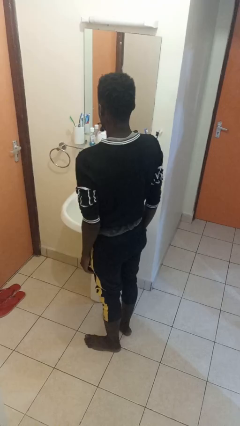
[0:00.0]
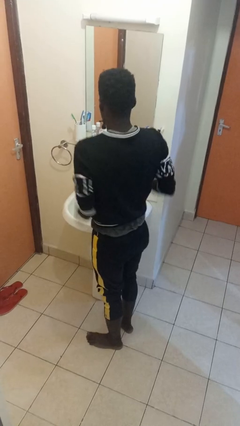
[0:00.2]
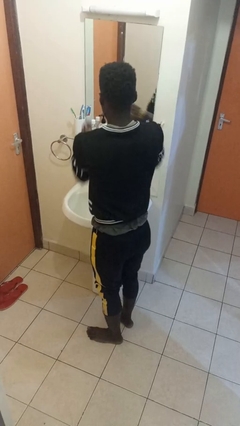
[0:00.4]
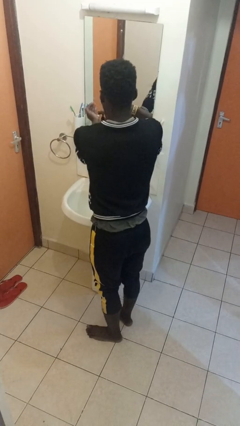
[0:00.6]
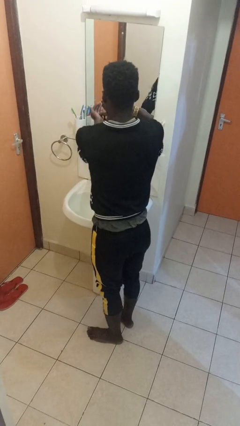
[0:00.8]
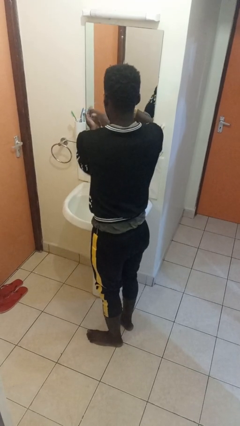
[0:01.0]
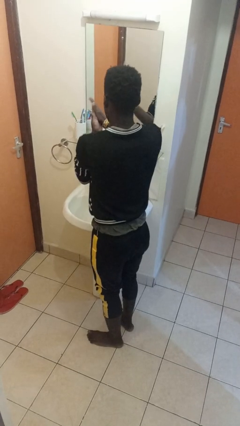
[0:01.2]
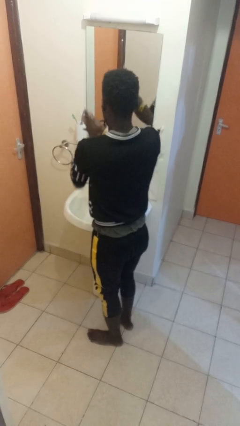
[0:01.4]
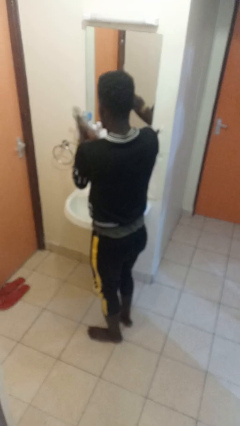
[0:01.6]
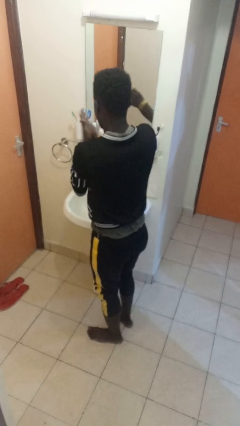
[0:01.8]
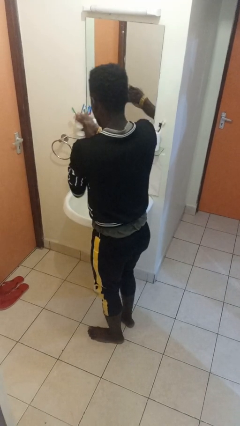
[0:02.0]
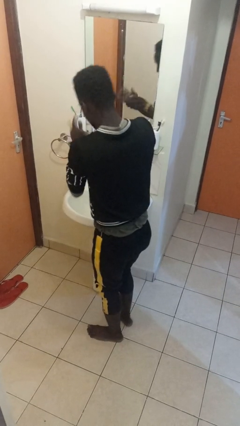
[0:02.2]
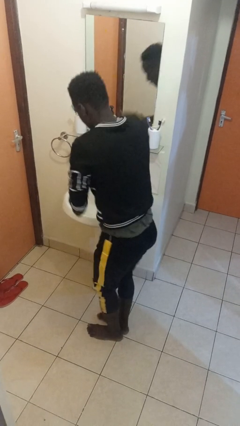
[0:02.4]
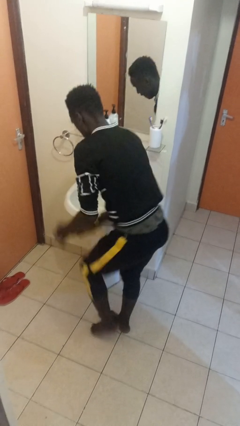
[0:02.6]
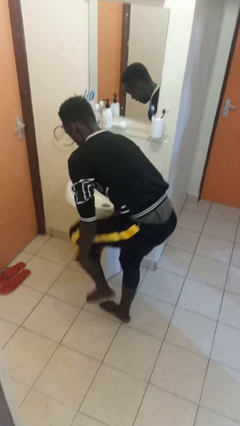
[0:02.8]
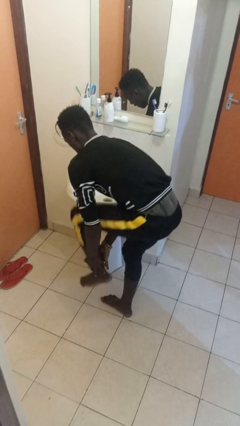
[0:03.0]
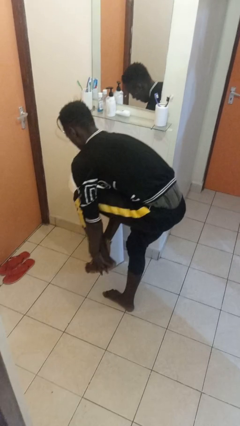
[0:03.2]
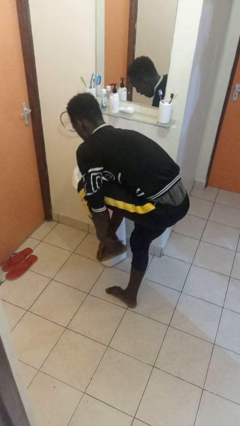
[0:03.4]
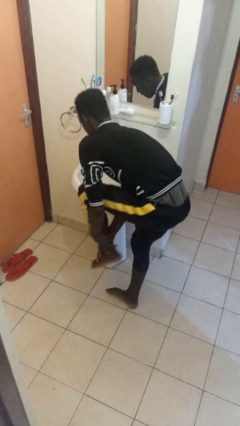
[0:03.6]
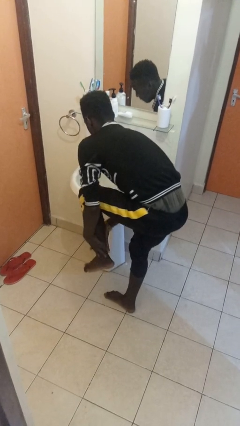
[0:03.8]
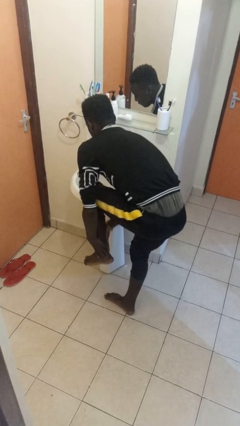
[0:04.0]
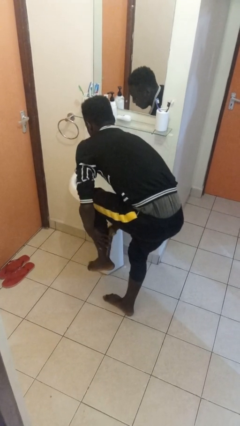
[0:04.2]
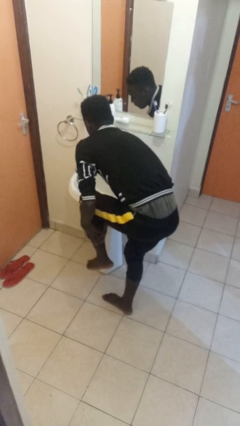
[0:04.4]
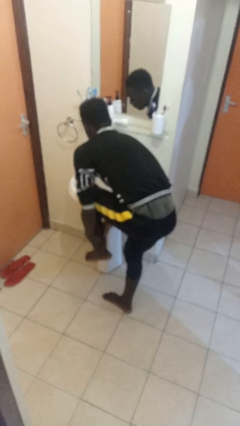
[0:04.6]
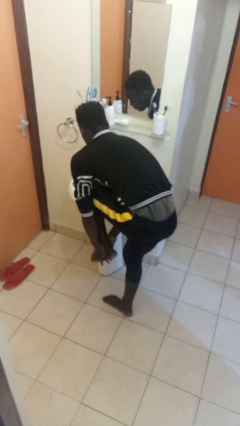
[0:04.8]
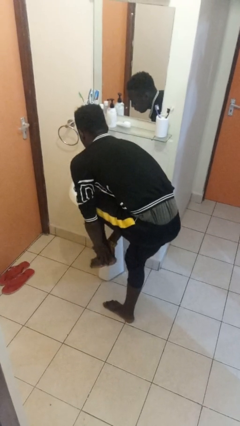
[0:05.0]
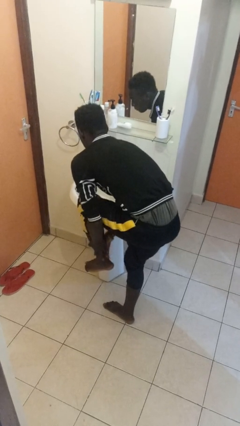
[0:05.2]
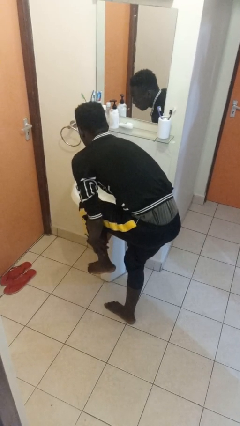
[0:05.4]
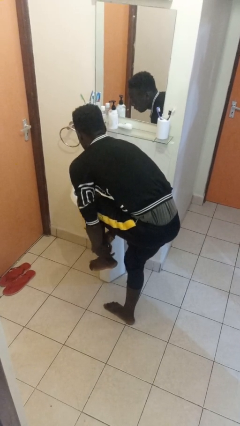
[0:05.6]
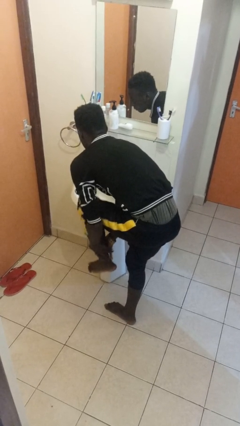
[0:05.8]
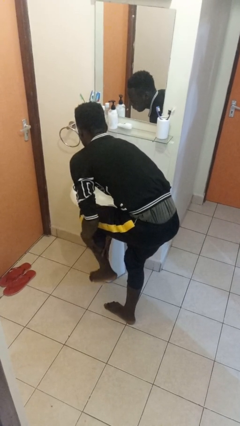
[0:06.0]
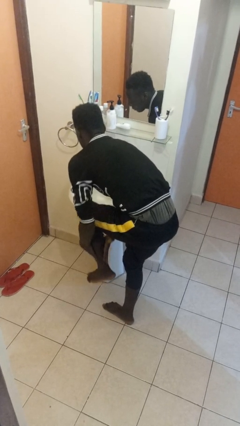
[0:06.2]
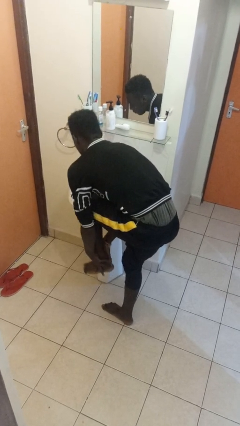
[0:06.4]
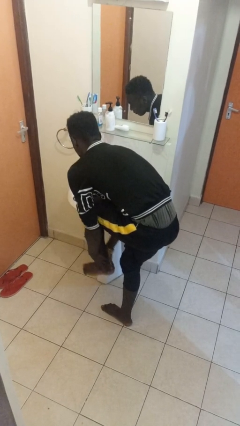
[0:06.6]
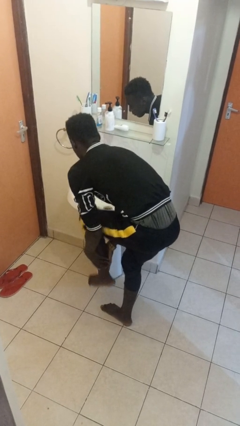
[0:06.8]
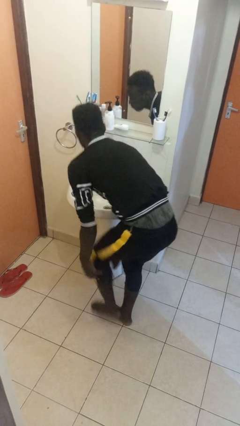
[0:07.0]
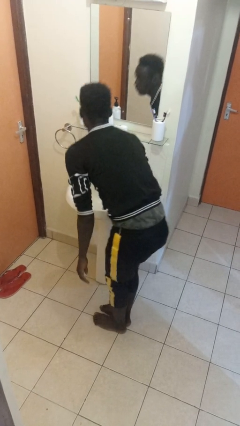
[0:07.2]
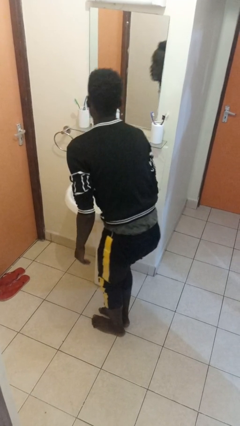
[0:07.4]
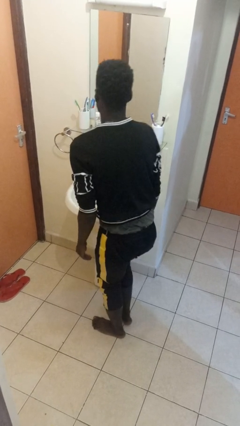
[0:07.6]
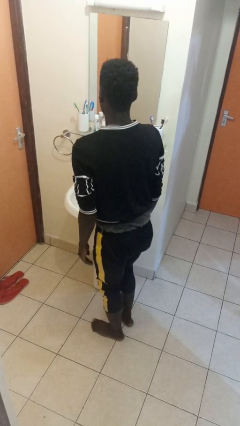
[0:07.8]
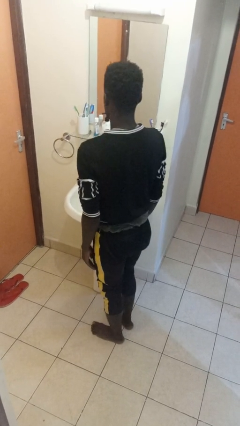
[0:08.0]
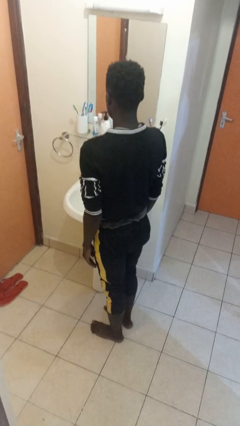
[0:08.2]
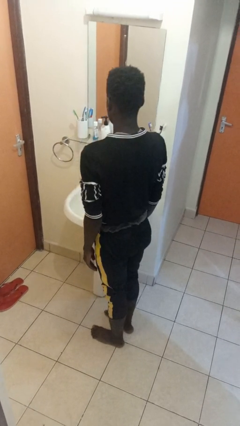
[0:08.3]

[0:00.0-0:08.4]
person applies facial moisturizer

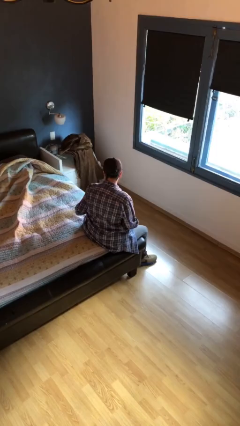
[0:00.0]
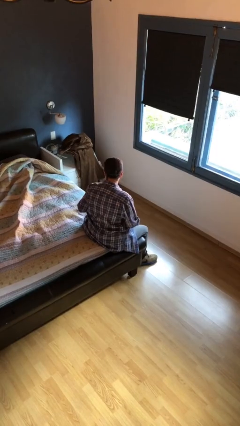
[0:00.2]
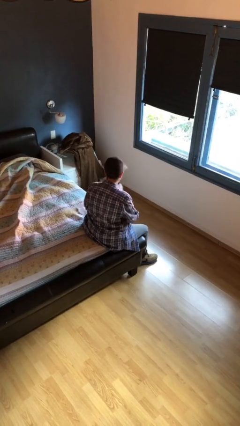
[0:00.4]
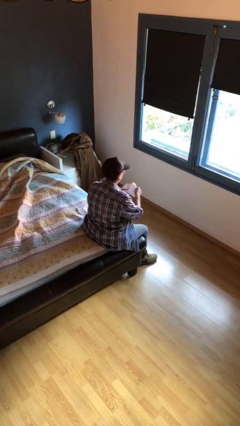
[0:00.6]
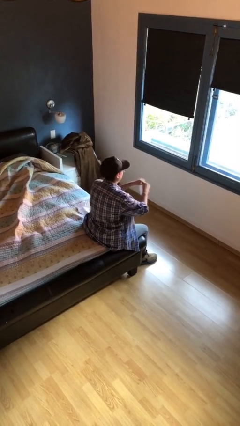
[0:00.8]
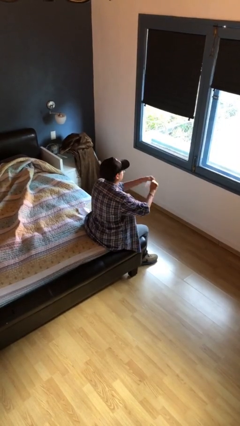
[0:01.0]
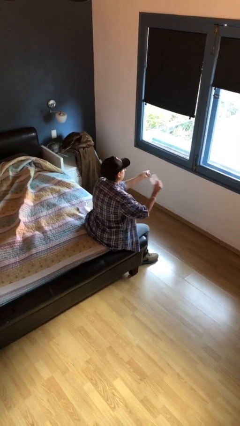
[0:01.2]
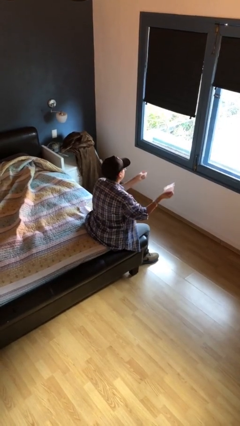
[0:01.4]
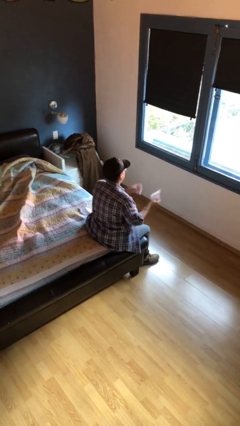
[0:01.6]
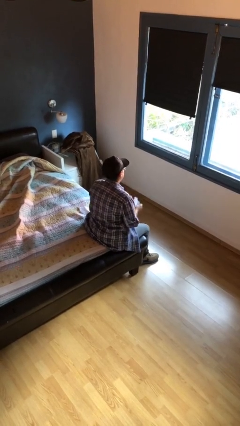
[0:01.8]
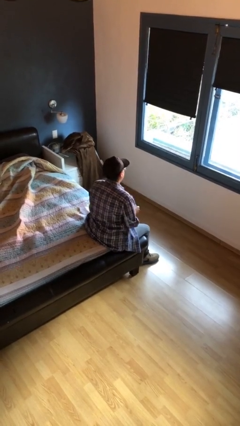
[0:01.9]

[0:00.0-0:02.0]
person tears paper

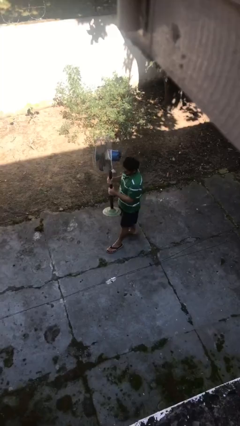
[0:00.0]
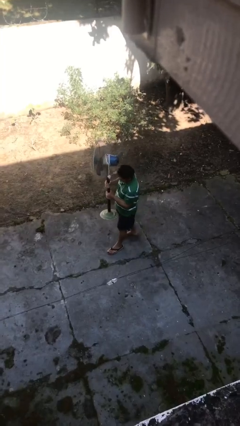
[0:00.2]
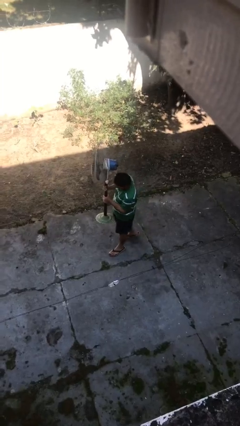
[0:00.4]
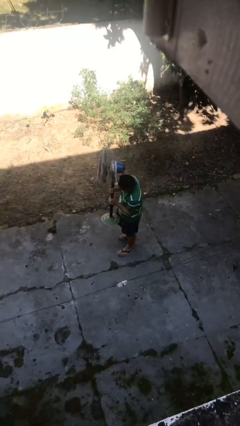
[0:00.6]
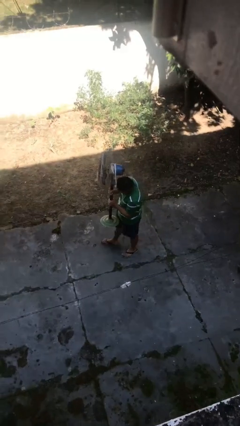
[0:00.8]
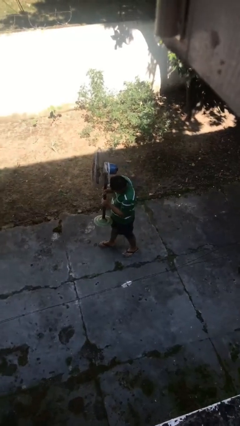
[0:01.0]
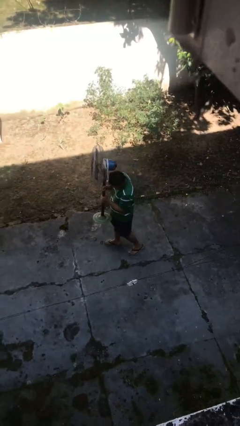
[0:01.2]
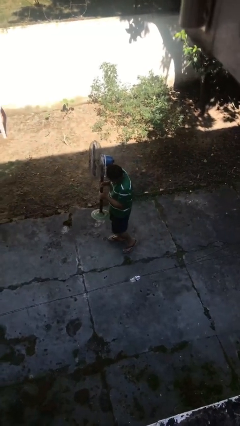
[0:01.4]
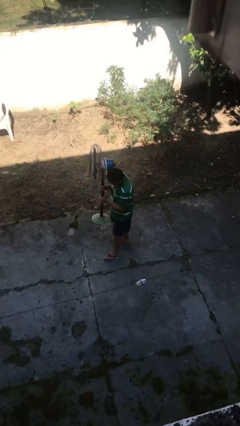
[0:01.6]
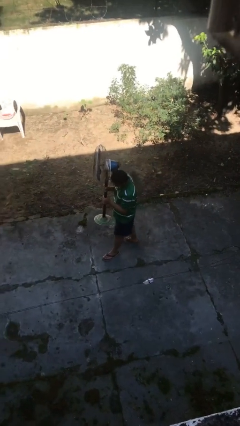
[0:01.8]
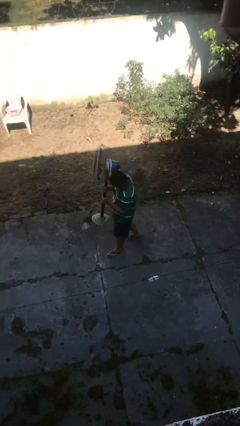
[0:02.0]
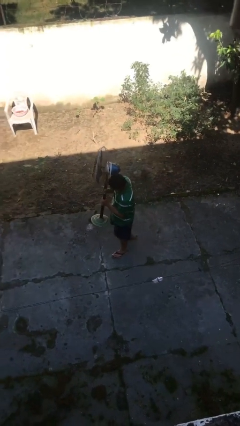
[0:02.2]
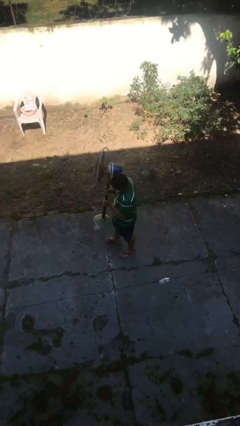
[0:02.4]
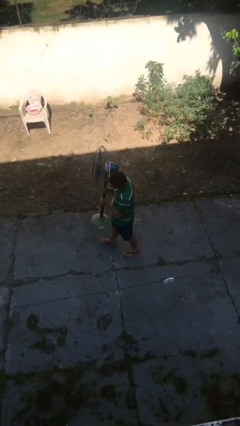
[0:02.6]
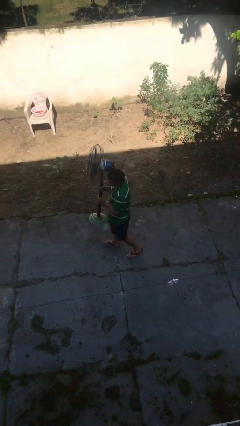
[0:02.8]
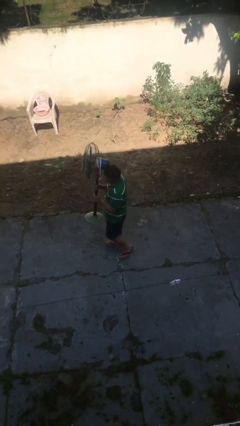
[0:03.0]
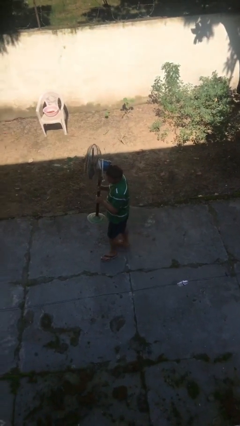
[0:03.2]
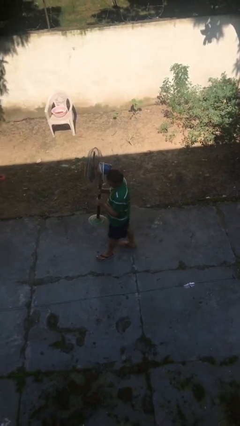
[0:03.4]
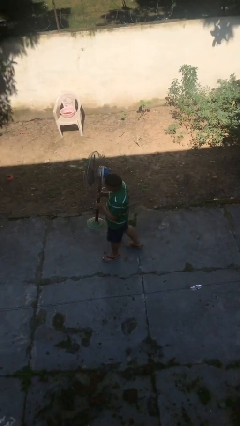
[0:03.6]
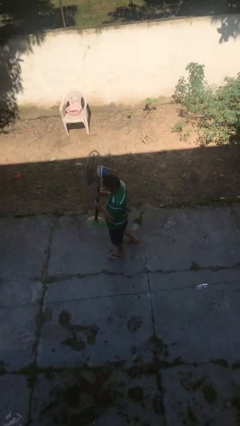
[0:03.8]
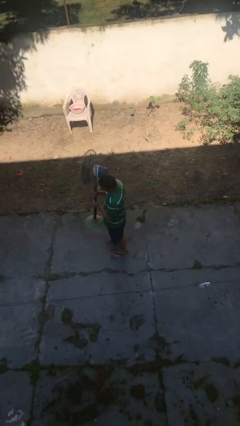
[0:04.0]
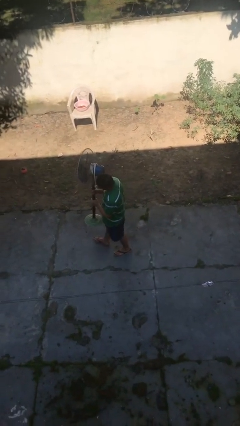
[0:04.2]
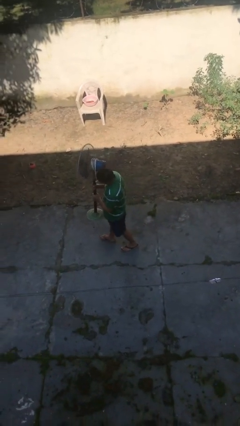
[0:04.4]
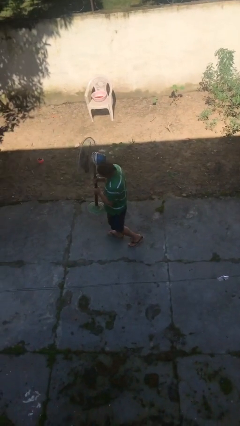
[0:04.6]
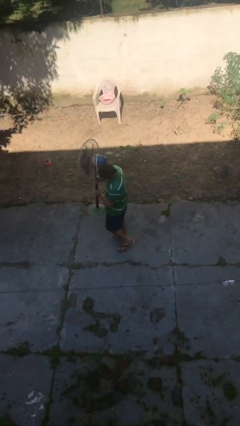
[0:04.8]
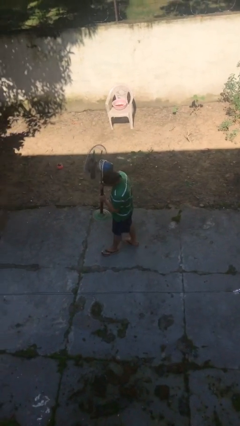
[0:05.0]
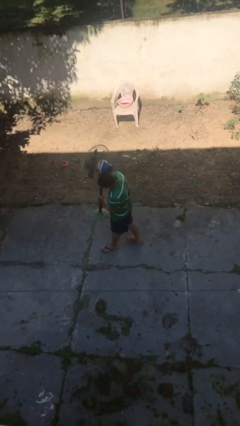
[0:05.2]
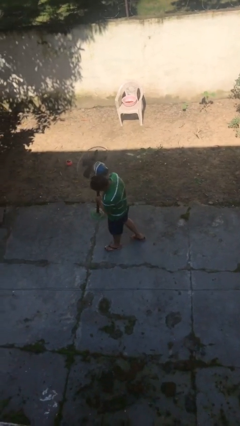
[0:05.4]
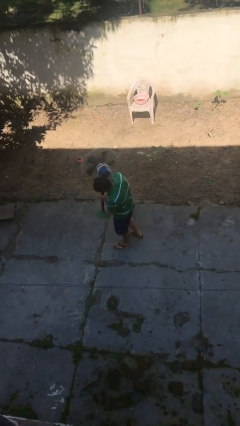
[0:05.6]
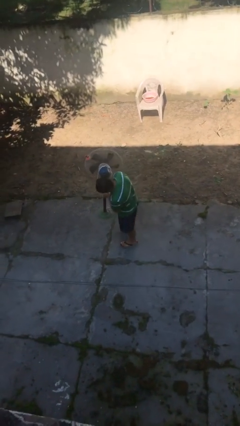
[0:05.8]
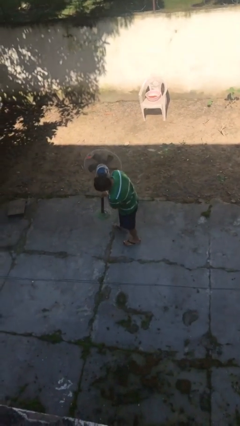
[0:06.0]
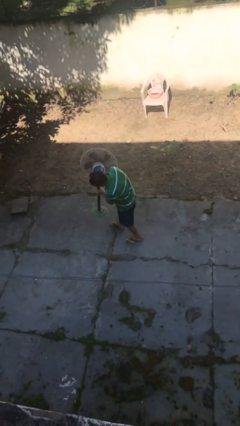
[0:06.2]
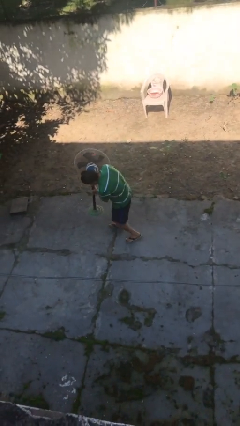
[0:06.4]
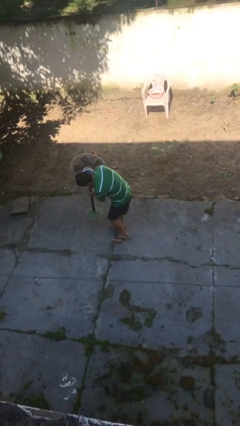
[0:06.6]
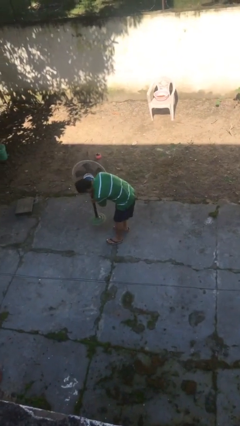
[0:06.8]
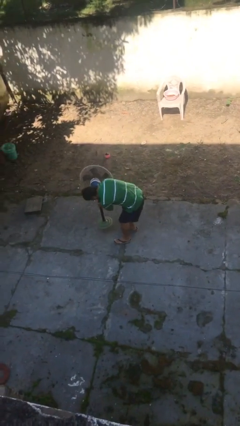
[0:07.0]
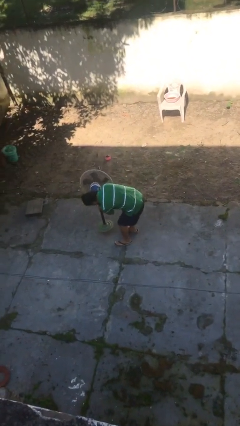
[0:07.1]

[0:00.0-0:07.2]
person carries heavy object
